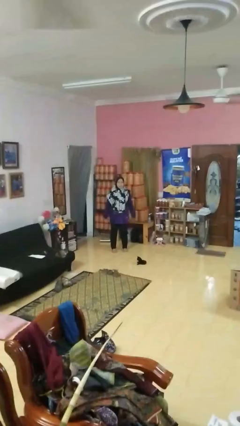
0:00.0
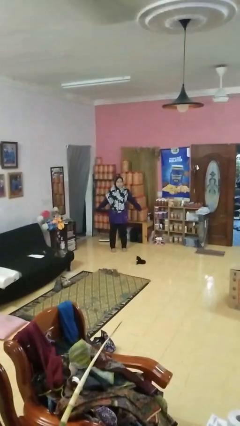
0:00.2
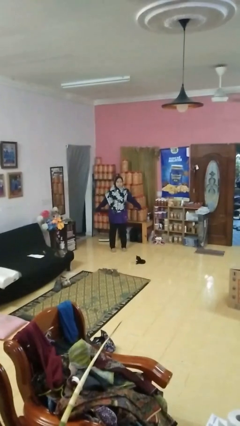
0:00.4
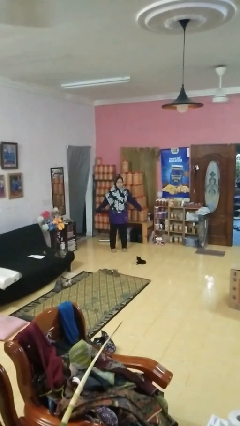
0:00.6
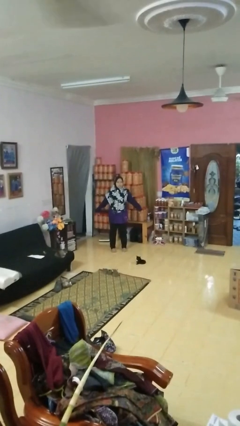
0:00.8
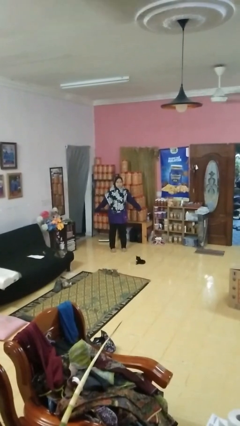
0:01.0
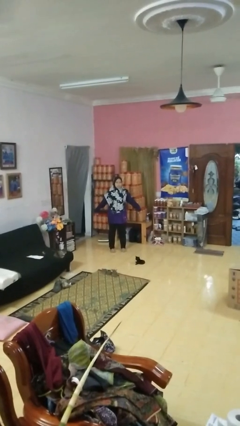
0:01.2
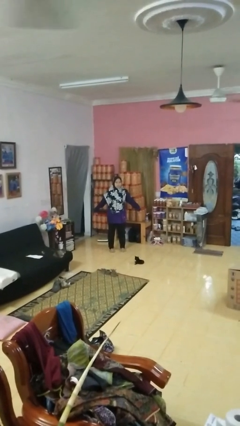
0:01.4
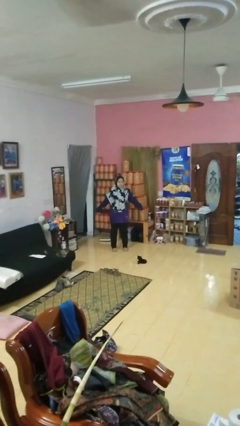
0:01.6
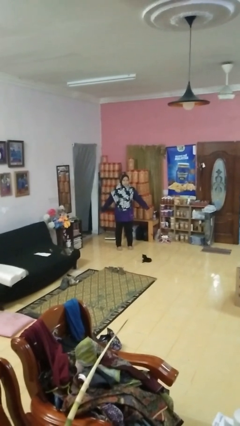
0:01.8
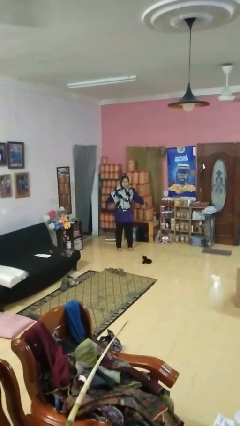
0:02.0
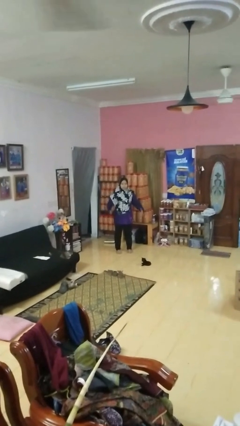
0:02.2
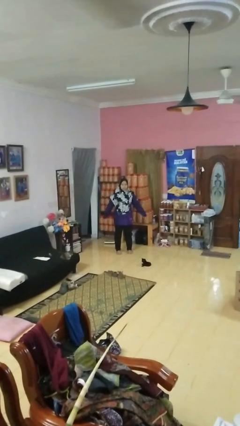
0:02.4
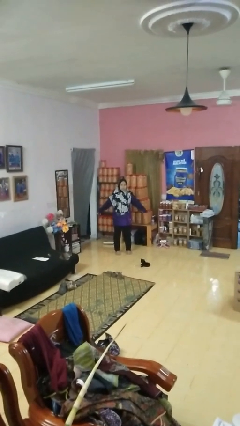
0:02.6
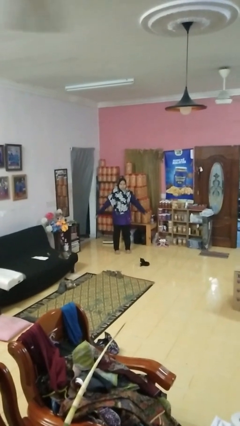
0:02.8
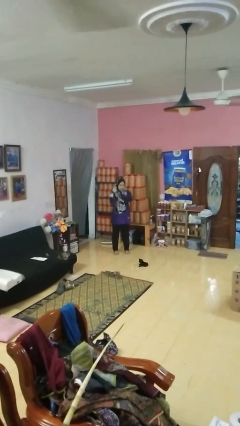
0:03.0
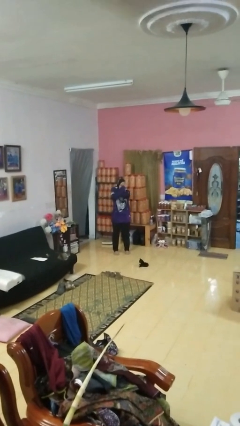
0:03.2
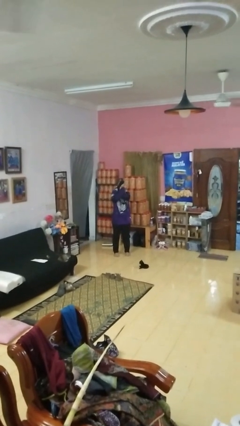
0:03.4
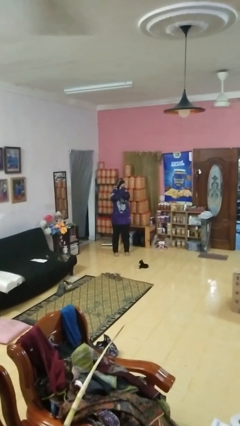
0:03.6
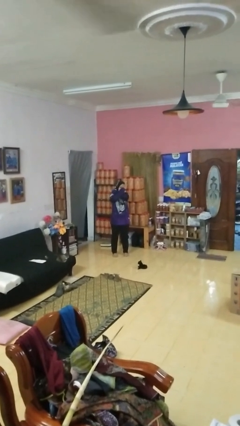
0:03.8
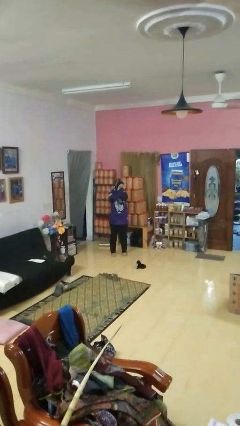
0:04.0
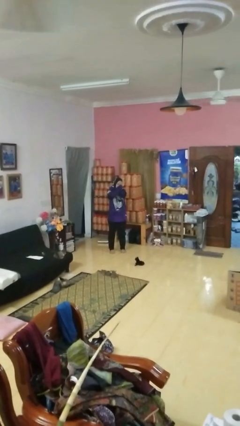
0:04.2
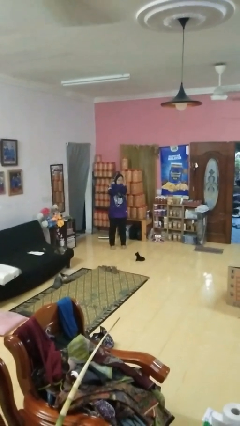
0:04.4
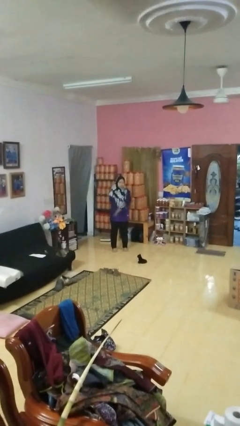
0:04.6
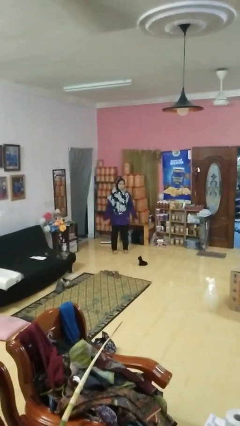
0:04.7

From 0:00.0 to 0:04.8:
person gestures arms x

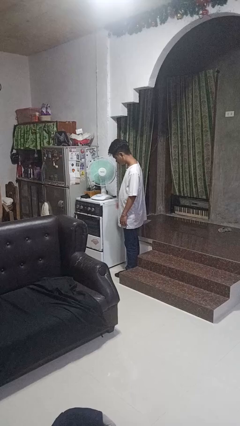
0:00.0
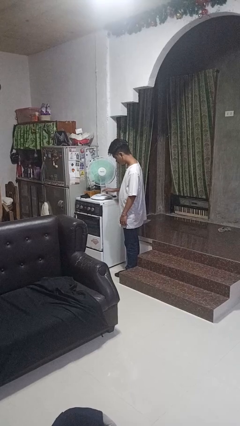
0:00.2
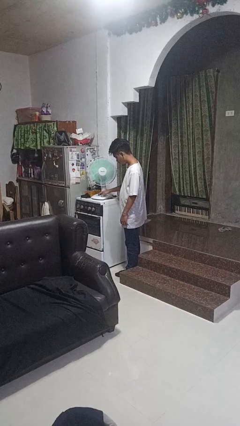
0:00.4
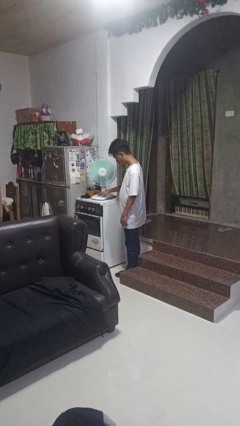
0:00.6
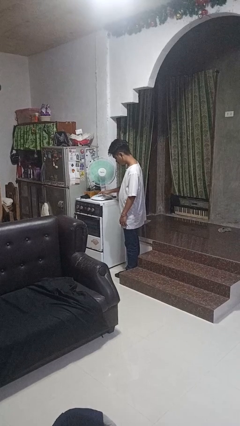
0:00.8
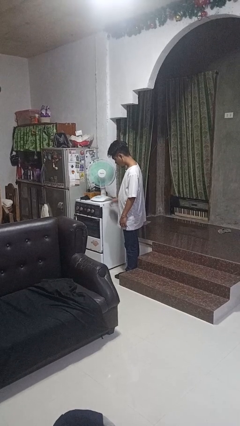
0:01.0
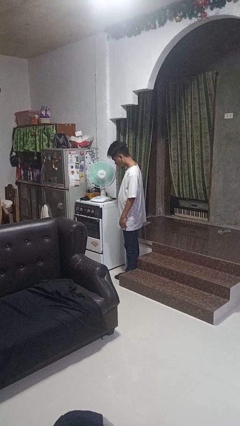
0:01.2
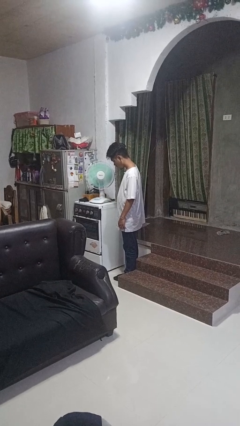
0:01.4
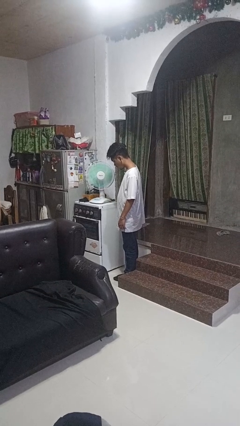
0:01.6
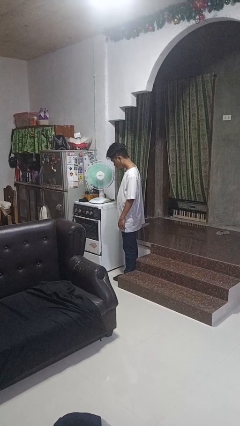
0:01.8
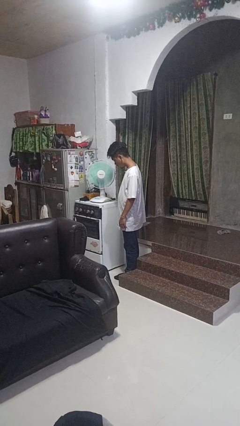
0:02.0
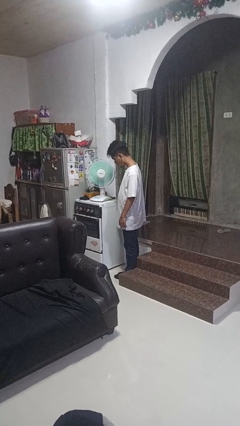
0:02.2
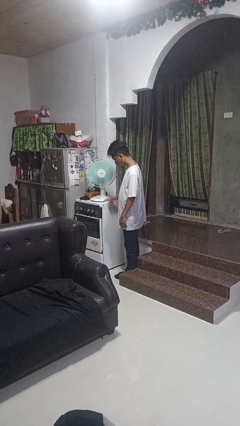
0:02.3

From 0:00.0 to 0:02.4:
person turns on fan

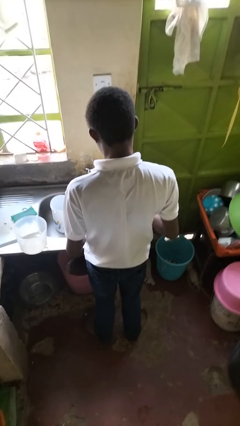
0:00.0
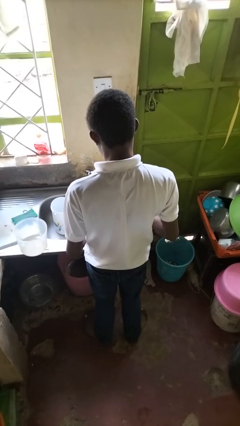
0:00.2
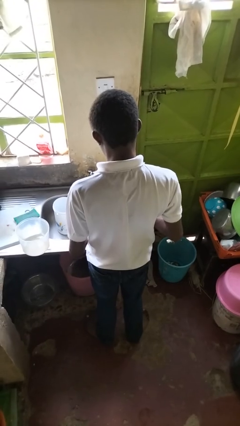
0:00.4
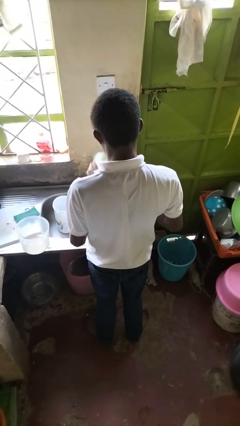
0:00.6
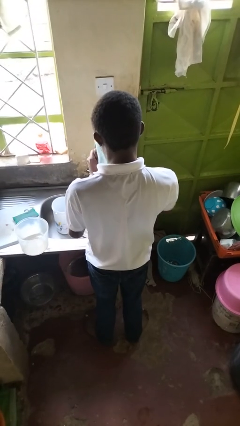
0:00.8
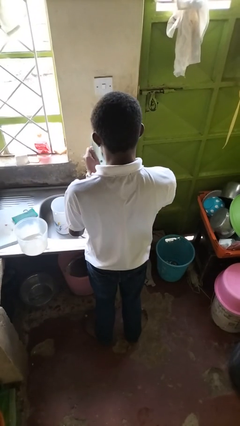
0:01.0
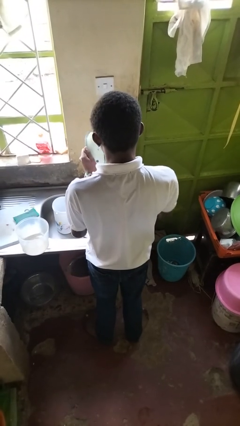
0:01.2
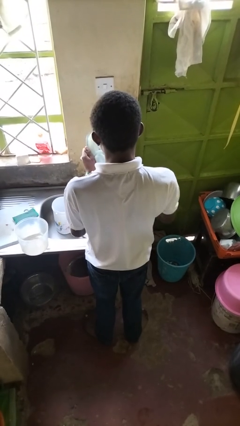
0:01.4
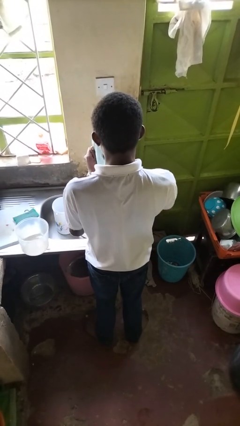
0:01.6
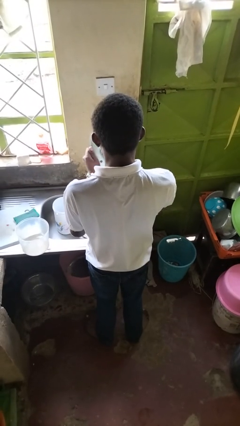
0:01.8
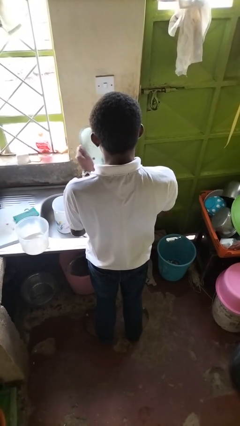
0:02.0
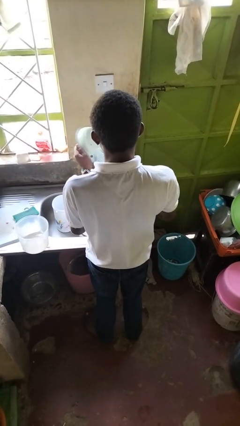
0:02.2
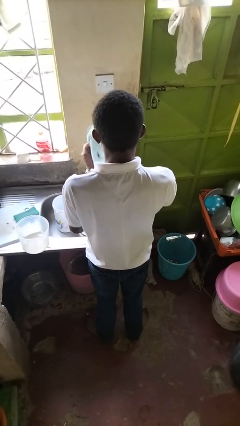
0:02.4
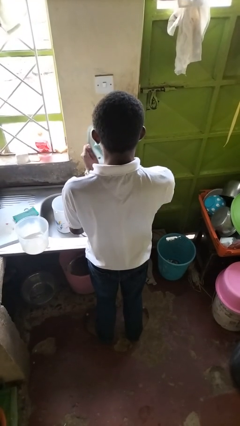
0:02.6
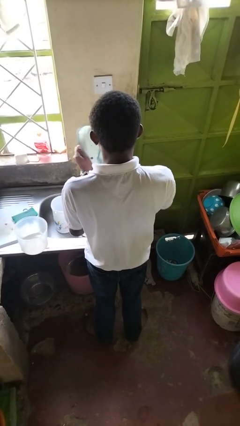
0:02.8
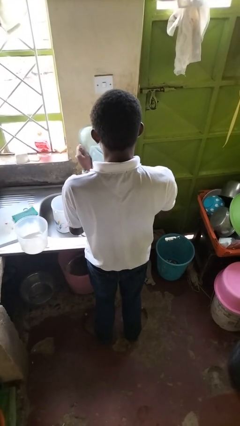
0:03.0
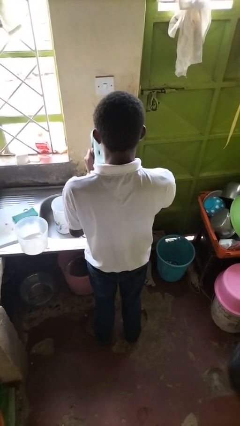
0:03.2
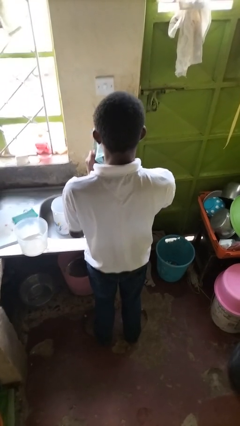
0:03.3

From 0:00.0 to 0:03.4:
person dries dish

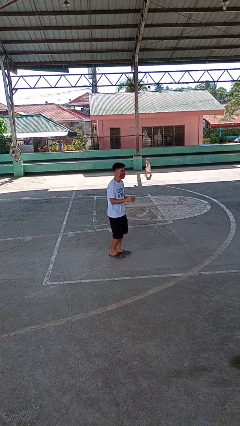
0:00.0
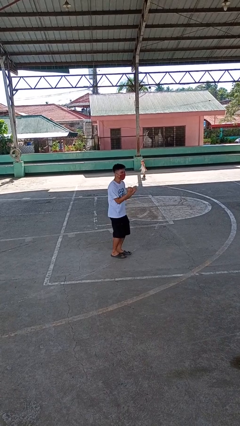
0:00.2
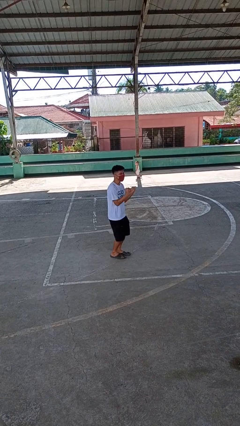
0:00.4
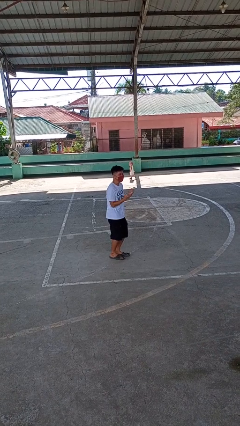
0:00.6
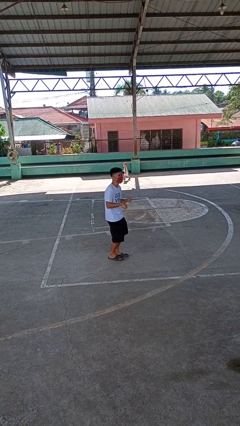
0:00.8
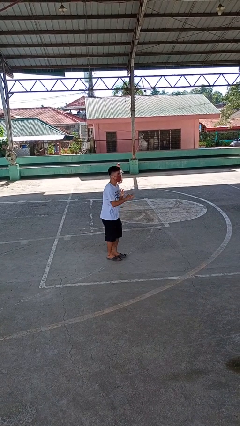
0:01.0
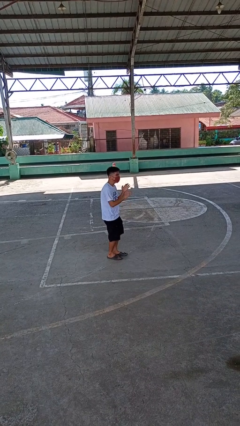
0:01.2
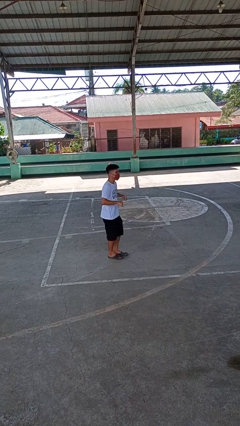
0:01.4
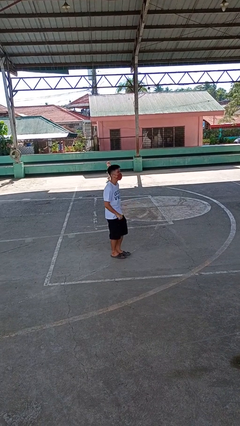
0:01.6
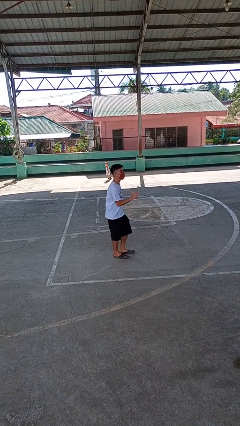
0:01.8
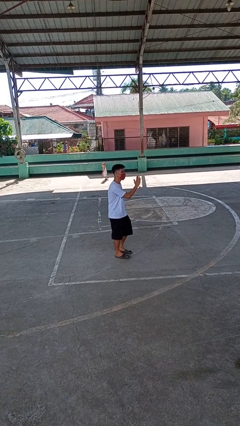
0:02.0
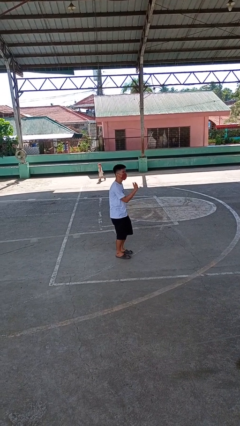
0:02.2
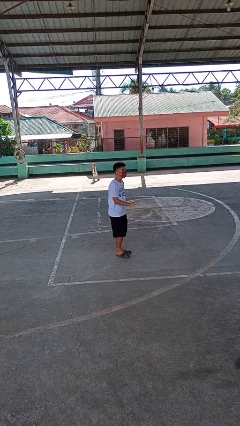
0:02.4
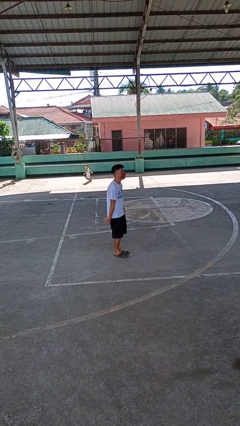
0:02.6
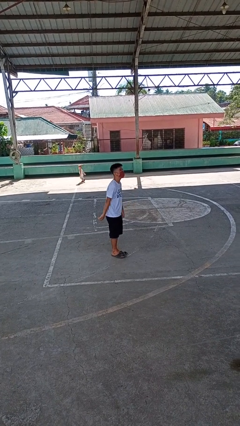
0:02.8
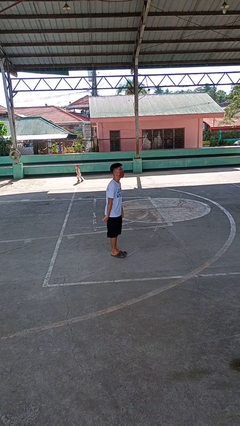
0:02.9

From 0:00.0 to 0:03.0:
person dances in place

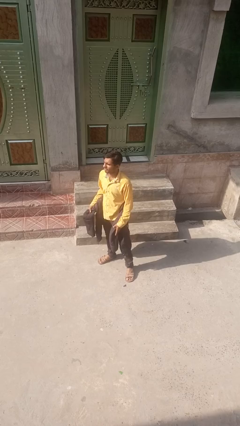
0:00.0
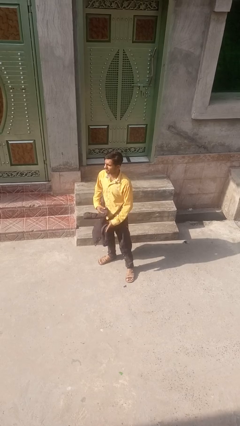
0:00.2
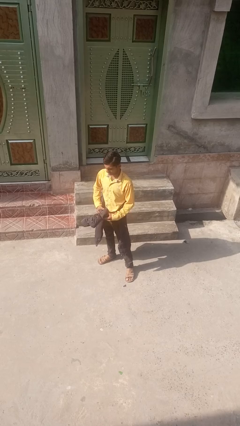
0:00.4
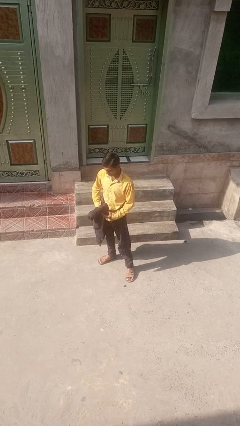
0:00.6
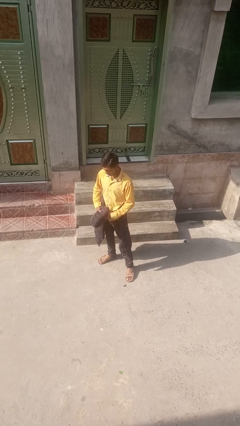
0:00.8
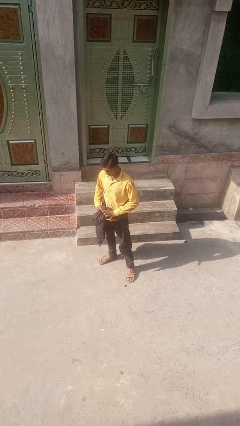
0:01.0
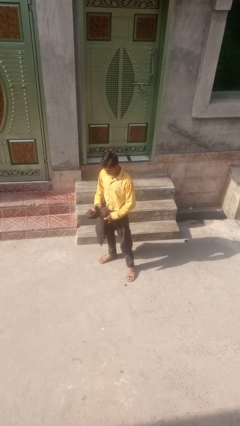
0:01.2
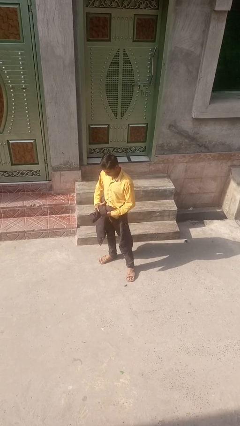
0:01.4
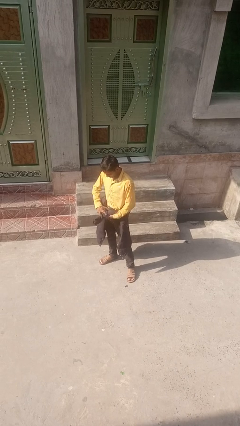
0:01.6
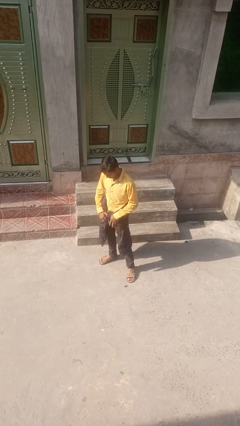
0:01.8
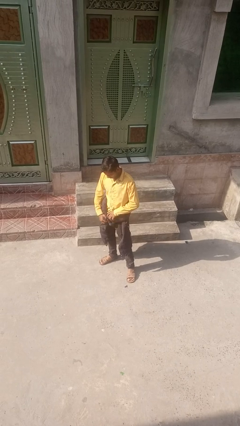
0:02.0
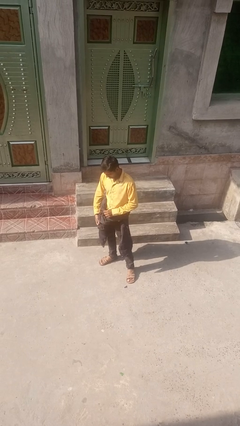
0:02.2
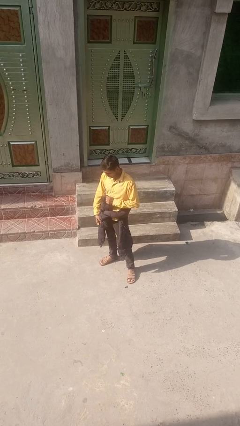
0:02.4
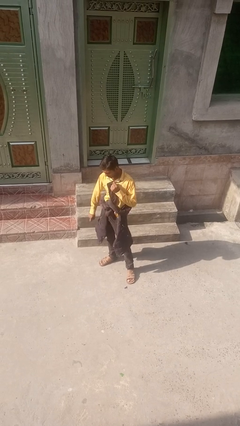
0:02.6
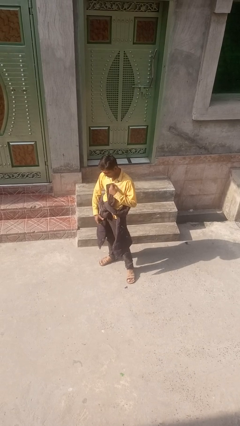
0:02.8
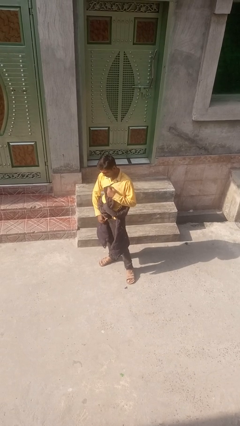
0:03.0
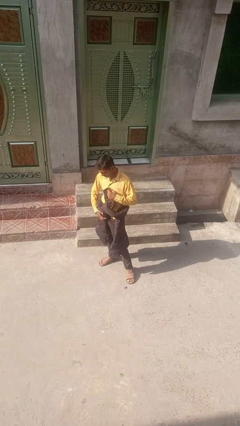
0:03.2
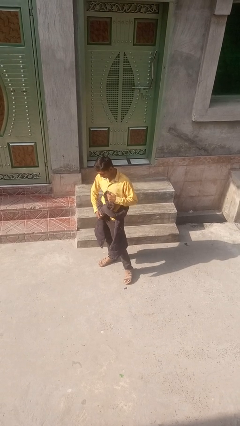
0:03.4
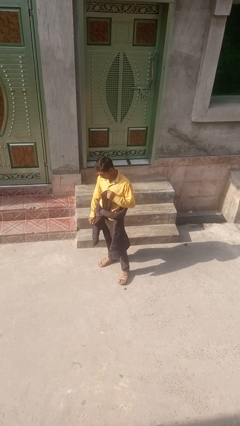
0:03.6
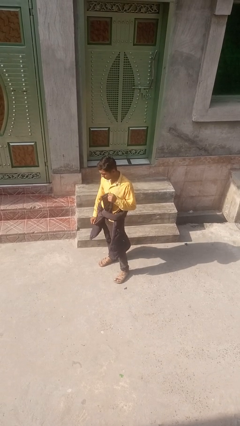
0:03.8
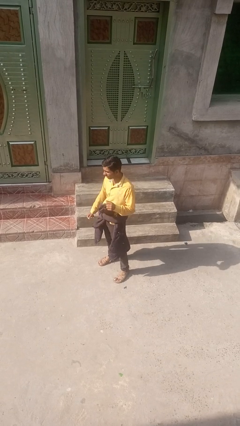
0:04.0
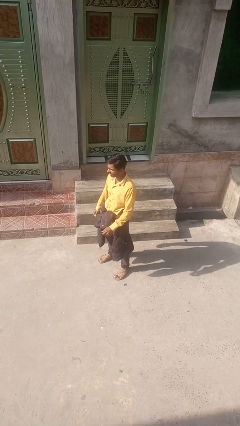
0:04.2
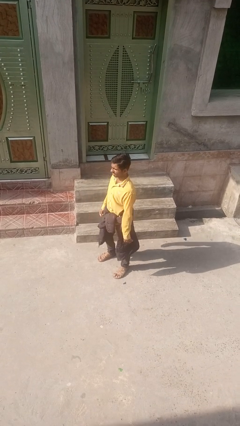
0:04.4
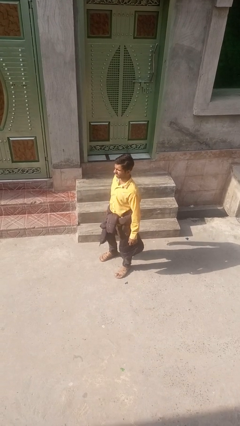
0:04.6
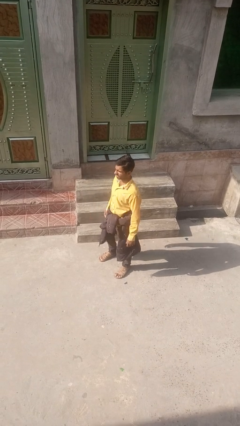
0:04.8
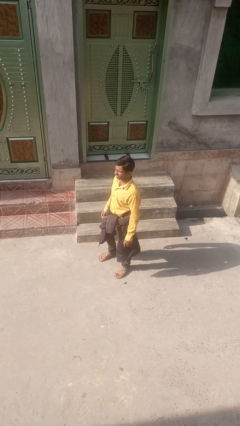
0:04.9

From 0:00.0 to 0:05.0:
person ties jacket around waist
